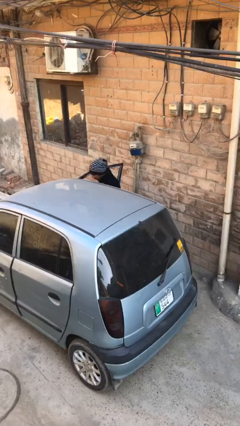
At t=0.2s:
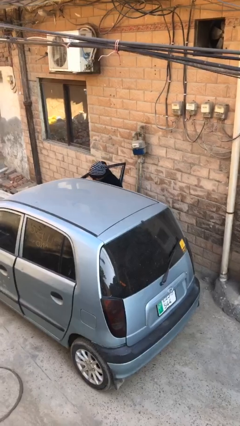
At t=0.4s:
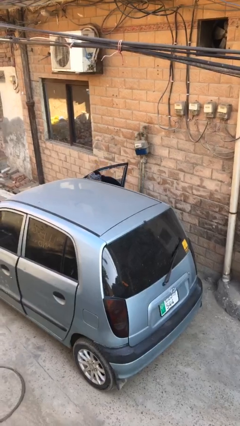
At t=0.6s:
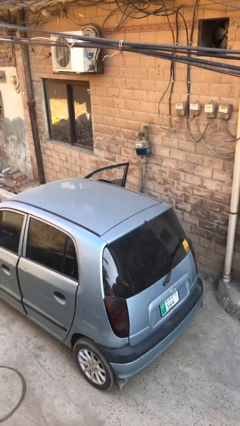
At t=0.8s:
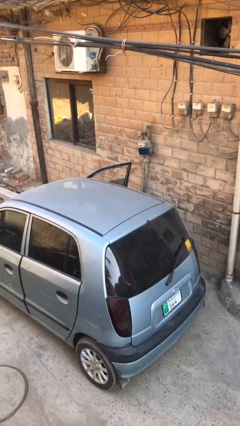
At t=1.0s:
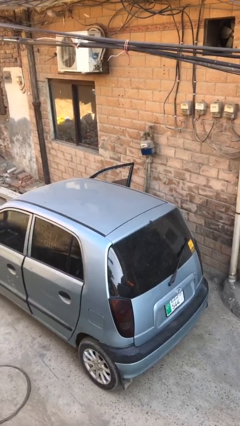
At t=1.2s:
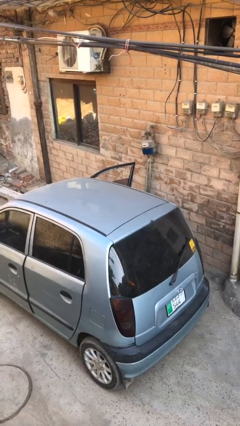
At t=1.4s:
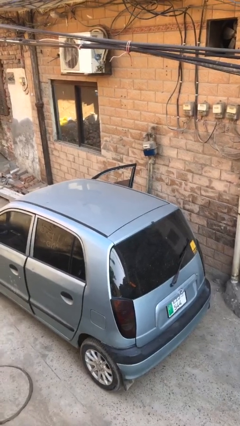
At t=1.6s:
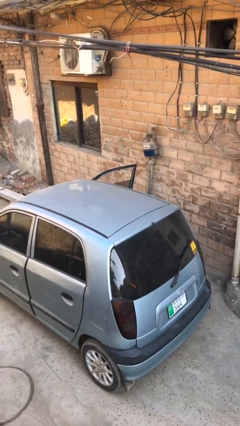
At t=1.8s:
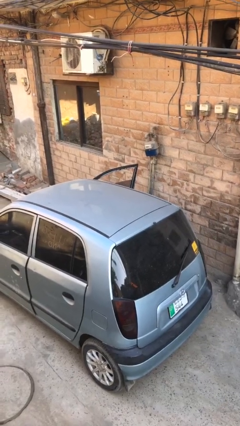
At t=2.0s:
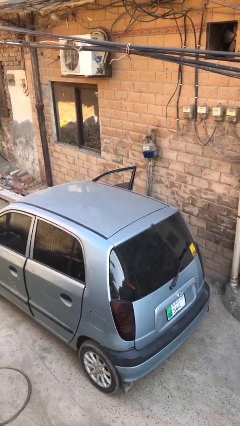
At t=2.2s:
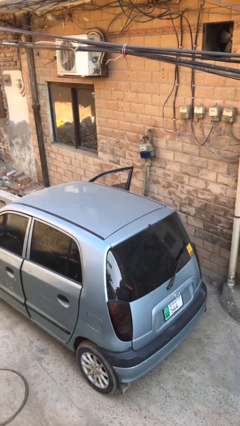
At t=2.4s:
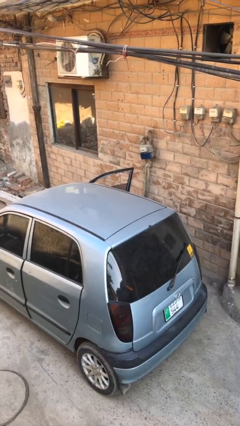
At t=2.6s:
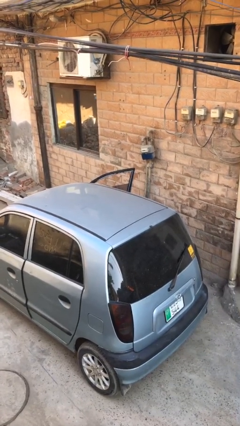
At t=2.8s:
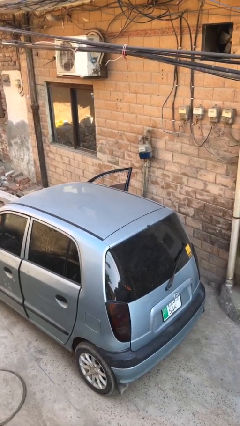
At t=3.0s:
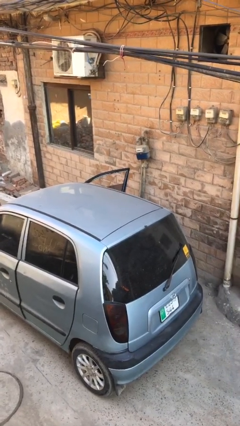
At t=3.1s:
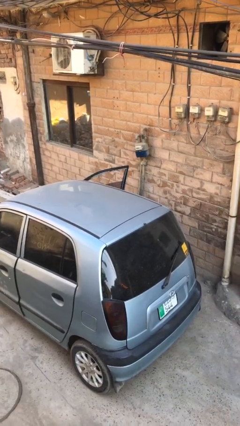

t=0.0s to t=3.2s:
person enters car

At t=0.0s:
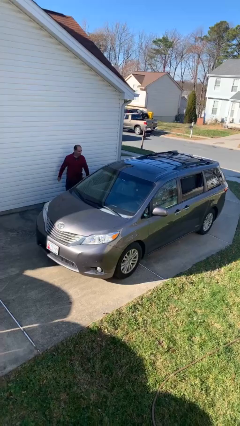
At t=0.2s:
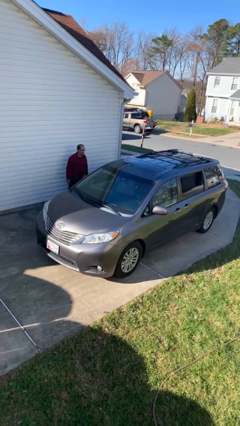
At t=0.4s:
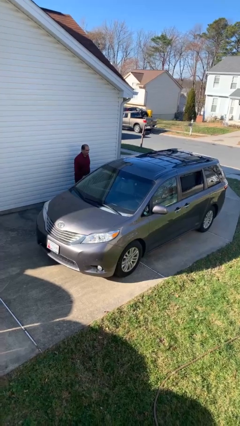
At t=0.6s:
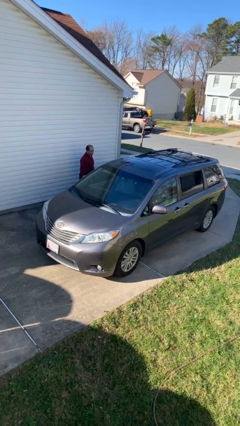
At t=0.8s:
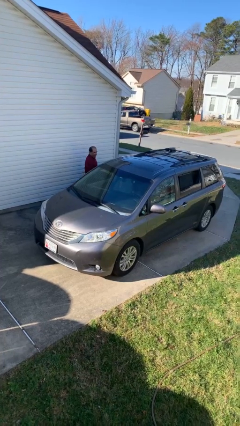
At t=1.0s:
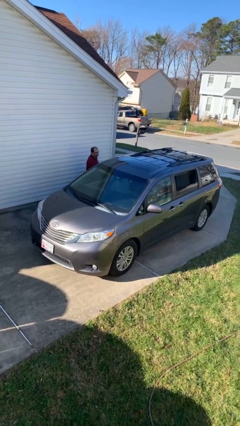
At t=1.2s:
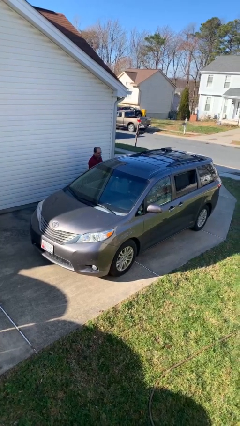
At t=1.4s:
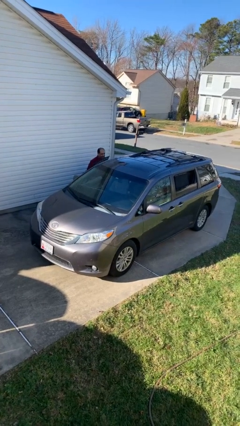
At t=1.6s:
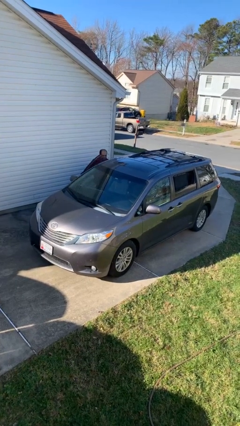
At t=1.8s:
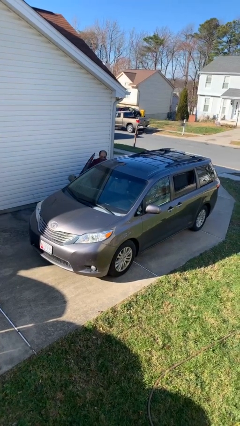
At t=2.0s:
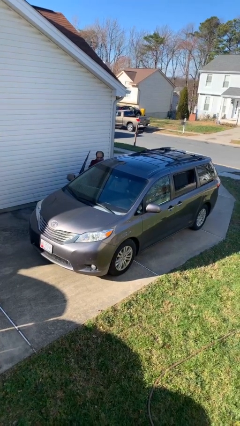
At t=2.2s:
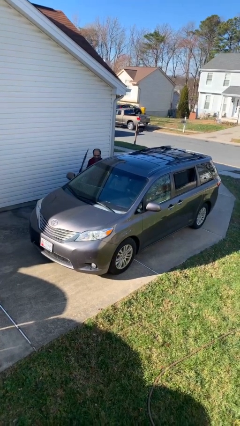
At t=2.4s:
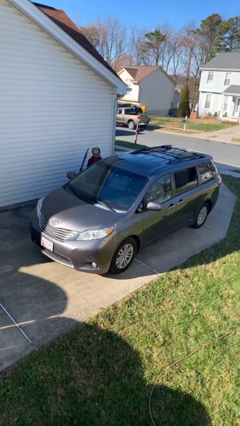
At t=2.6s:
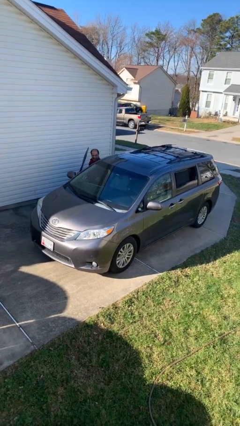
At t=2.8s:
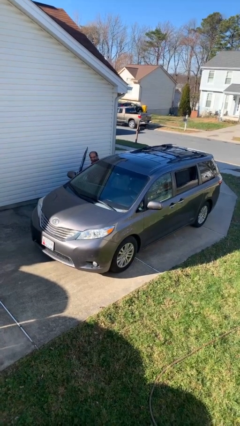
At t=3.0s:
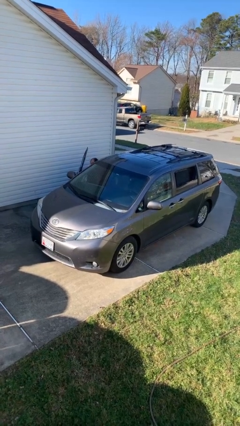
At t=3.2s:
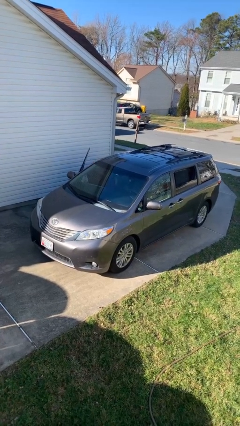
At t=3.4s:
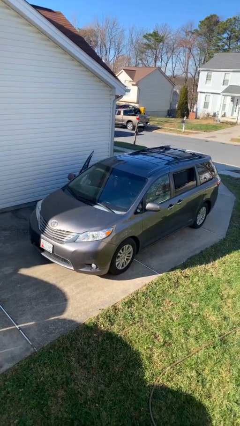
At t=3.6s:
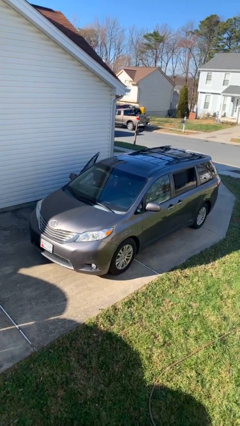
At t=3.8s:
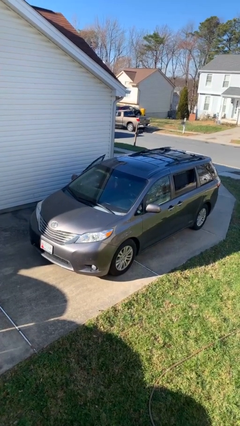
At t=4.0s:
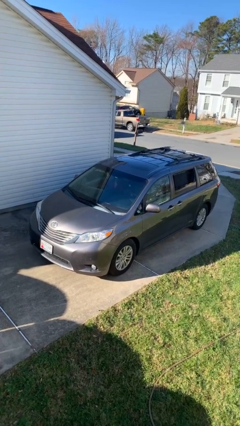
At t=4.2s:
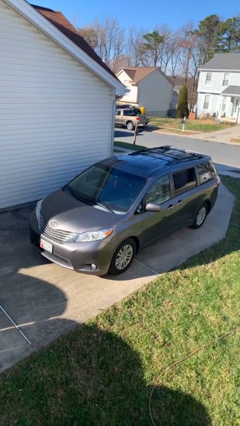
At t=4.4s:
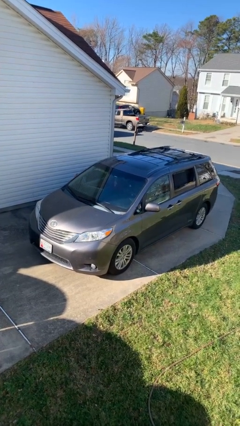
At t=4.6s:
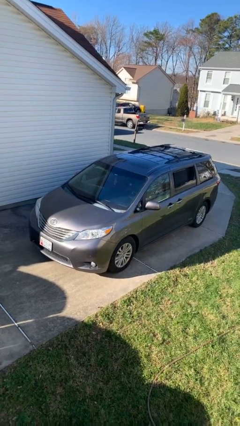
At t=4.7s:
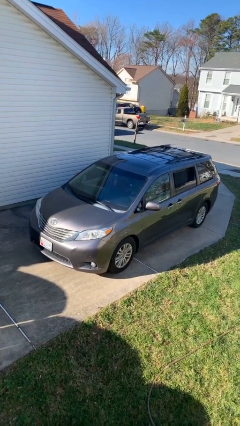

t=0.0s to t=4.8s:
car picks up person

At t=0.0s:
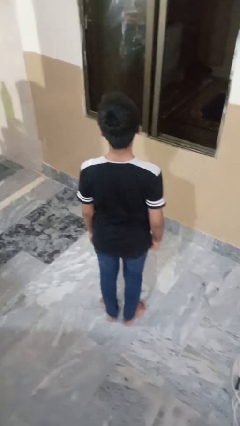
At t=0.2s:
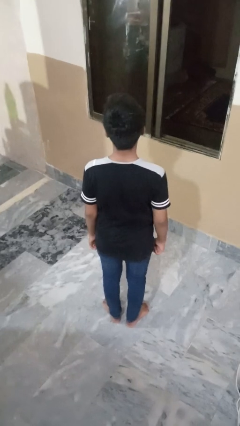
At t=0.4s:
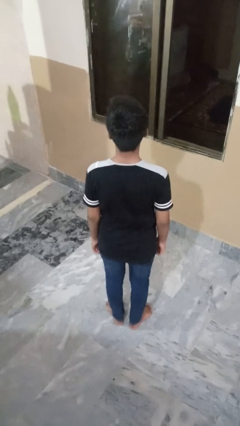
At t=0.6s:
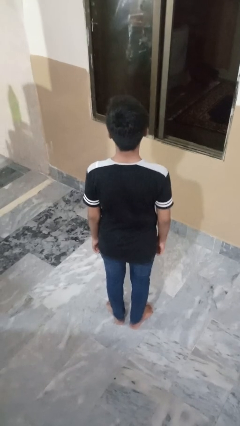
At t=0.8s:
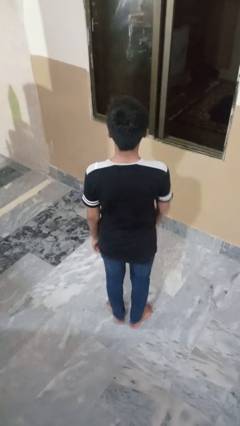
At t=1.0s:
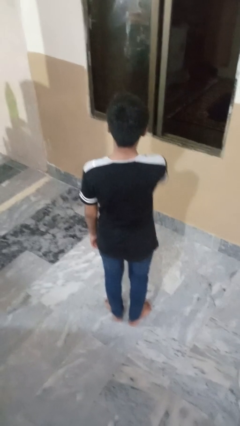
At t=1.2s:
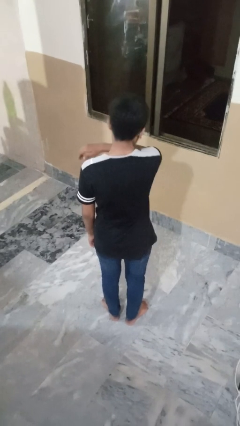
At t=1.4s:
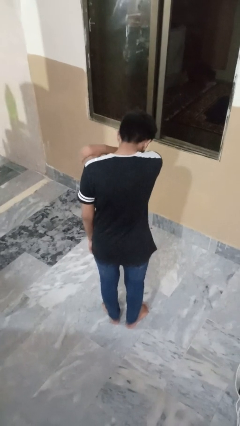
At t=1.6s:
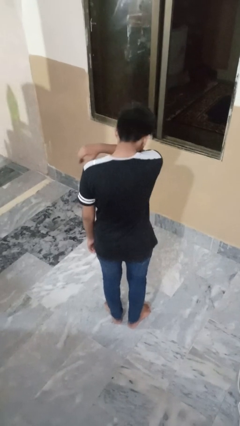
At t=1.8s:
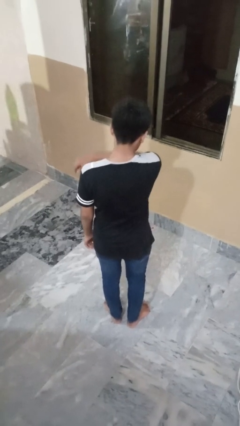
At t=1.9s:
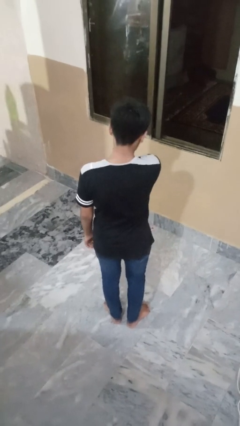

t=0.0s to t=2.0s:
person sneezes into arm

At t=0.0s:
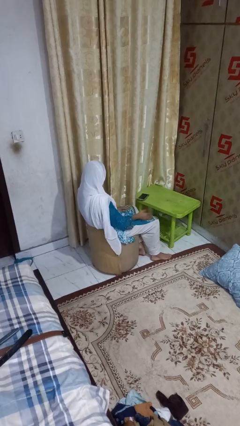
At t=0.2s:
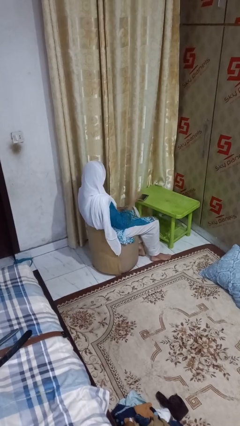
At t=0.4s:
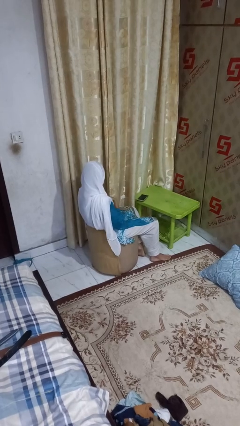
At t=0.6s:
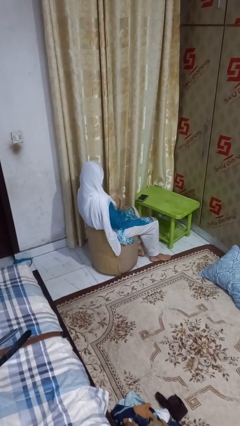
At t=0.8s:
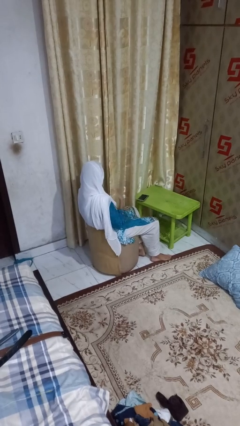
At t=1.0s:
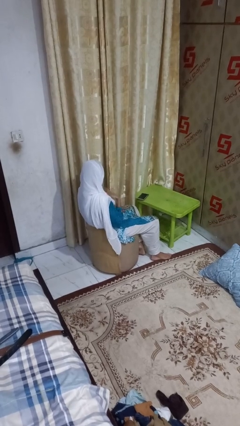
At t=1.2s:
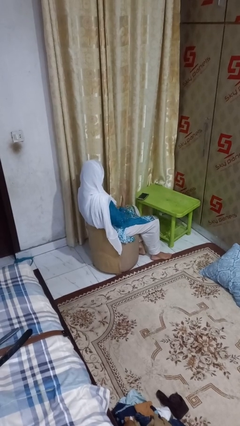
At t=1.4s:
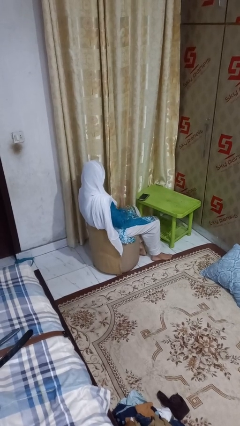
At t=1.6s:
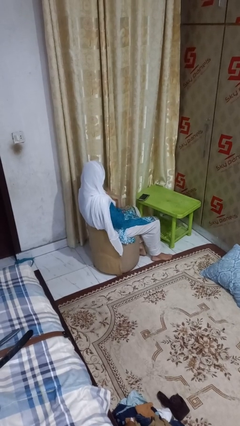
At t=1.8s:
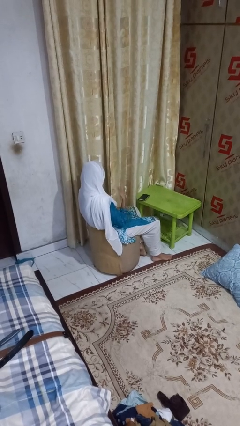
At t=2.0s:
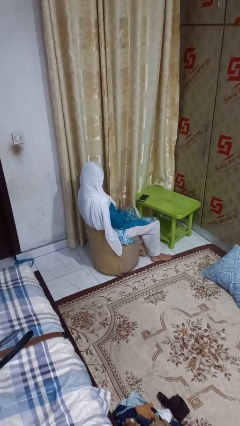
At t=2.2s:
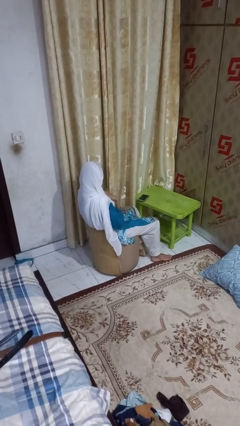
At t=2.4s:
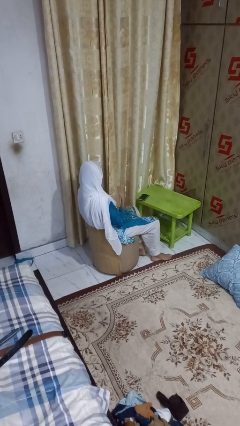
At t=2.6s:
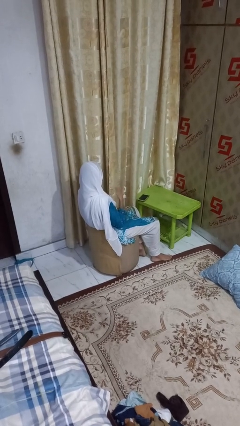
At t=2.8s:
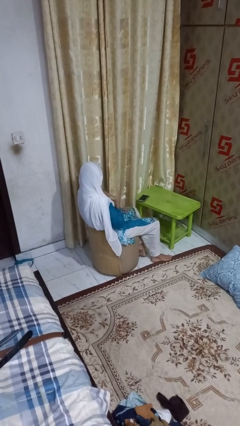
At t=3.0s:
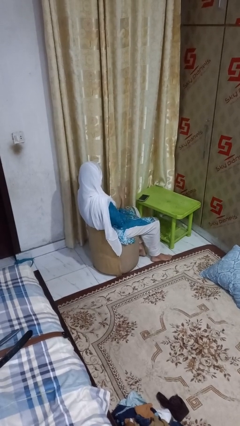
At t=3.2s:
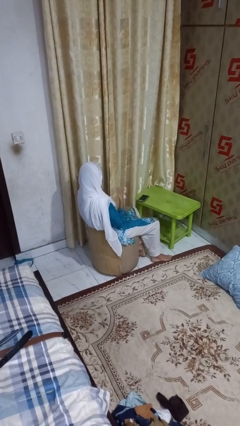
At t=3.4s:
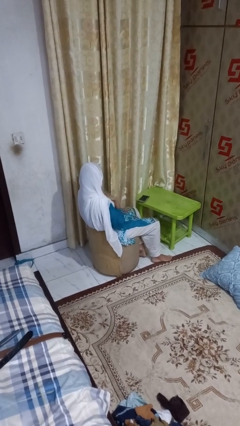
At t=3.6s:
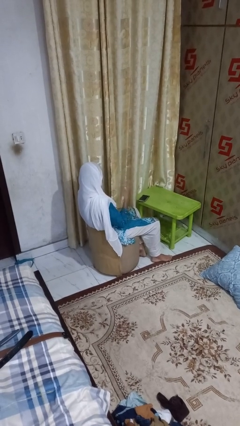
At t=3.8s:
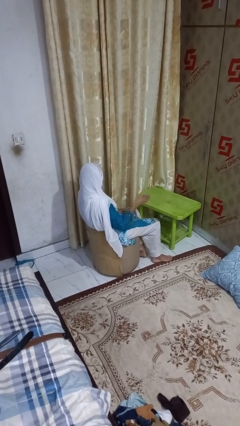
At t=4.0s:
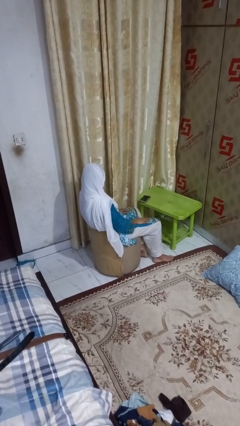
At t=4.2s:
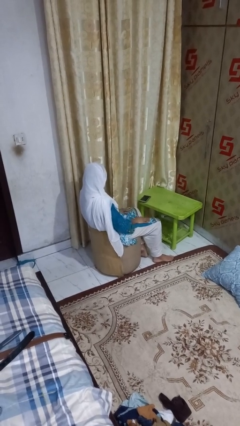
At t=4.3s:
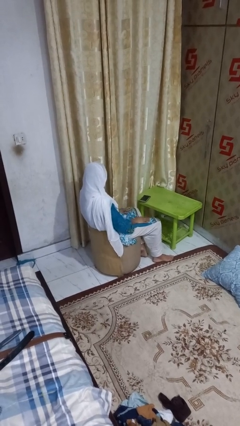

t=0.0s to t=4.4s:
person drums on chest

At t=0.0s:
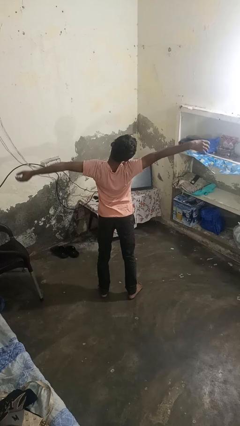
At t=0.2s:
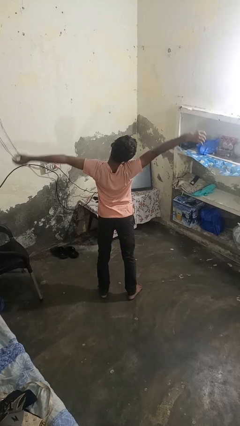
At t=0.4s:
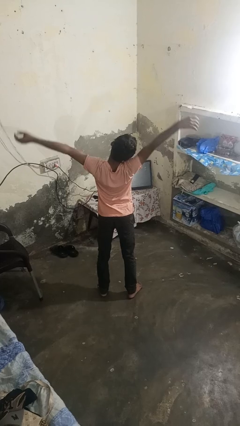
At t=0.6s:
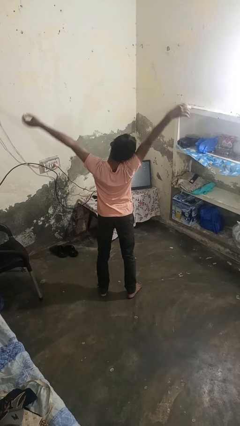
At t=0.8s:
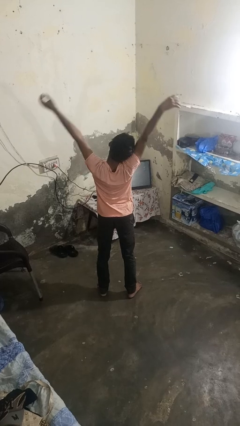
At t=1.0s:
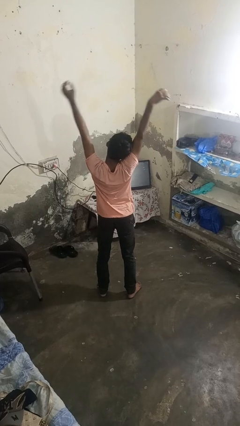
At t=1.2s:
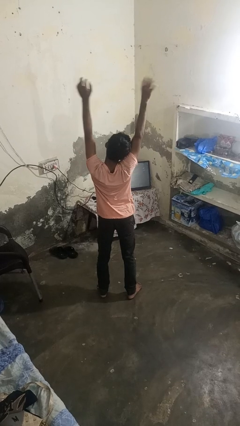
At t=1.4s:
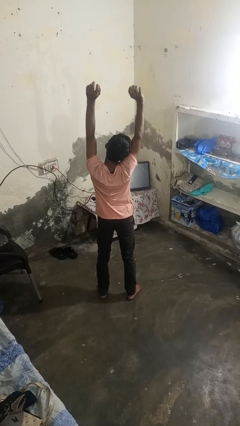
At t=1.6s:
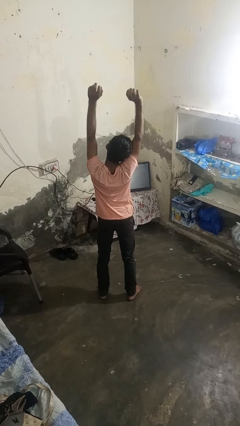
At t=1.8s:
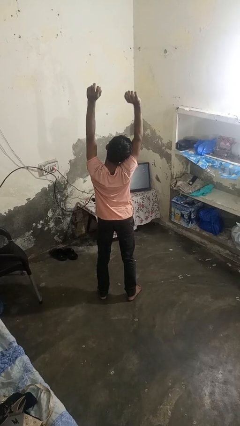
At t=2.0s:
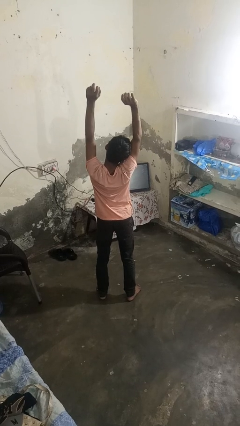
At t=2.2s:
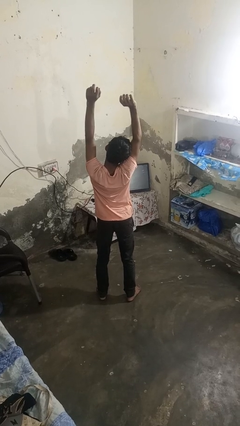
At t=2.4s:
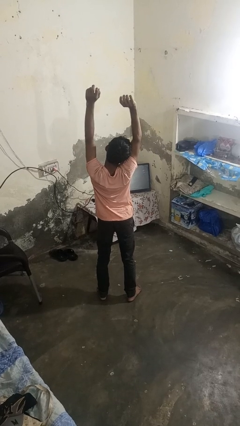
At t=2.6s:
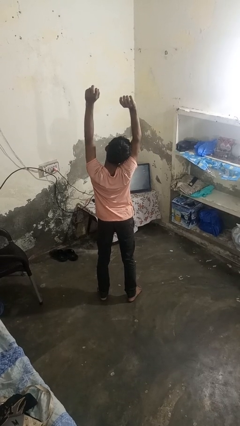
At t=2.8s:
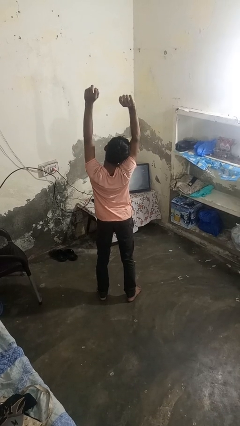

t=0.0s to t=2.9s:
person stretches arms over head

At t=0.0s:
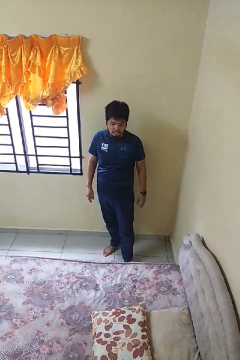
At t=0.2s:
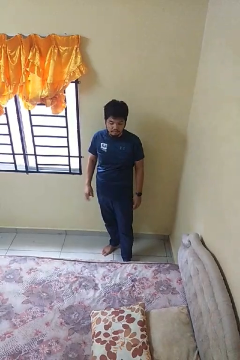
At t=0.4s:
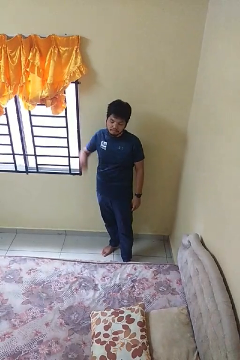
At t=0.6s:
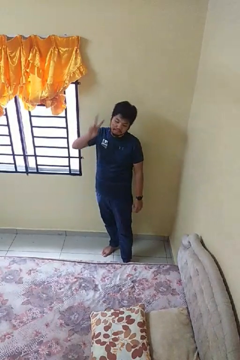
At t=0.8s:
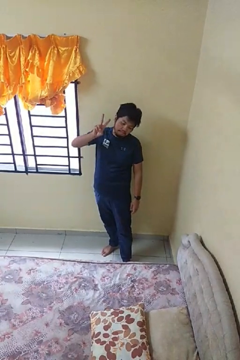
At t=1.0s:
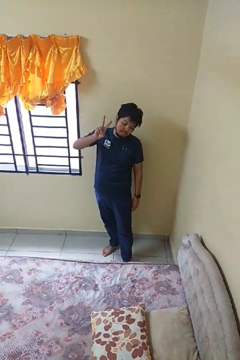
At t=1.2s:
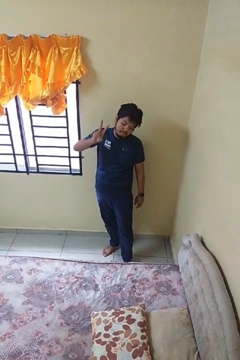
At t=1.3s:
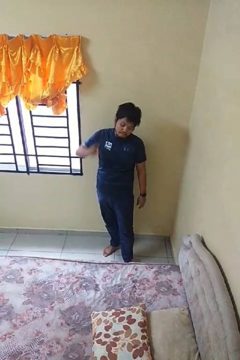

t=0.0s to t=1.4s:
person gestures peace
